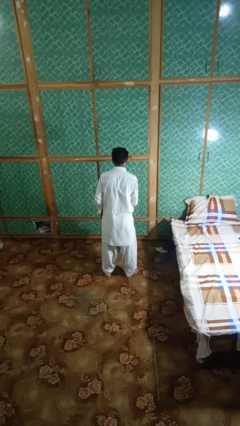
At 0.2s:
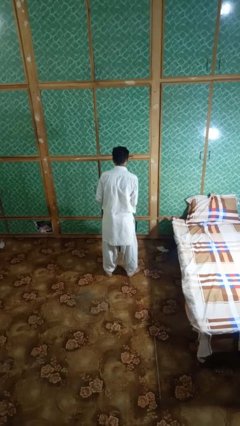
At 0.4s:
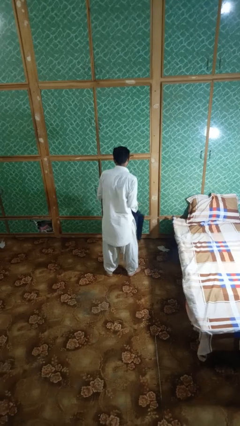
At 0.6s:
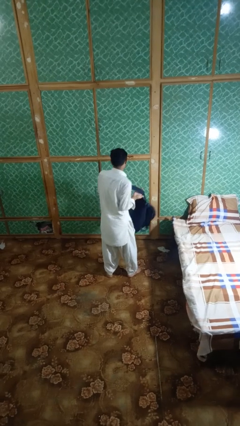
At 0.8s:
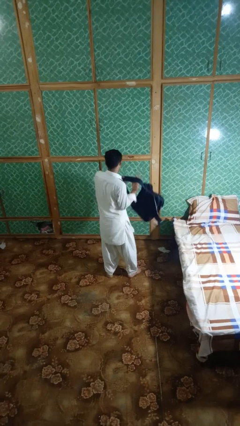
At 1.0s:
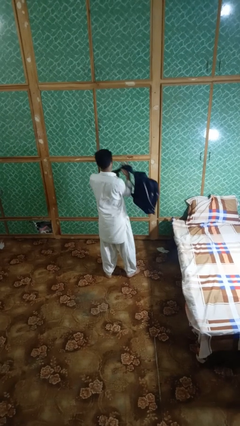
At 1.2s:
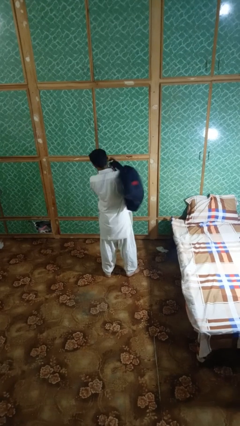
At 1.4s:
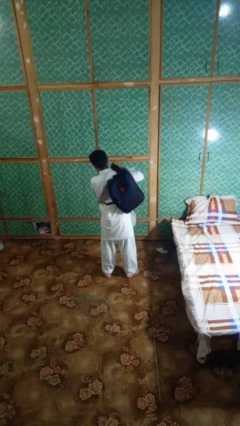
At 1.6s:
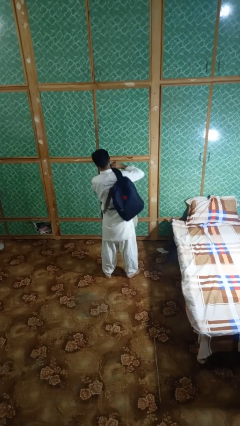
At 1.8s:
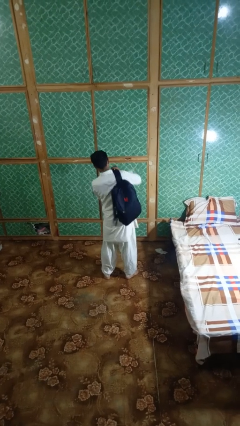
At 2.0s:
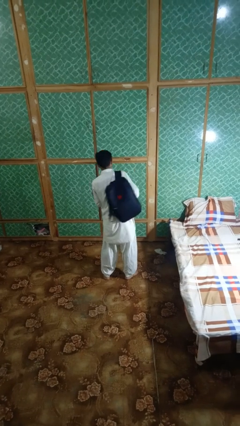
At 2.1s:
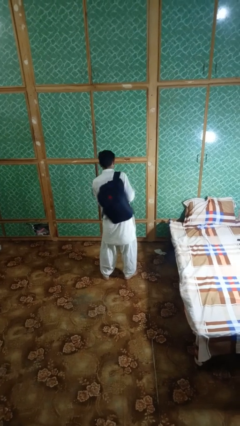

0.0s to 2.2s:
person puts on backpack

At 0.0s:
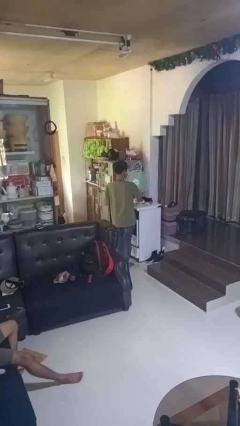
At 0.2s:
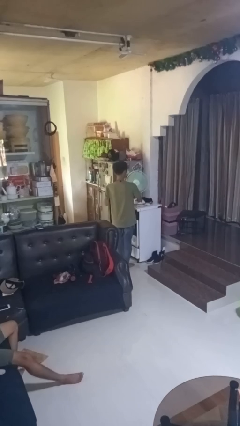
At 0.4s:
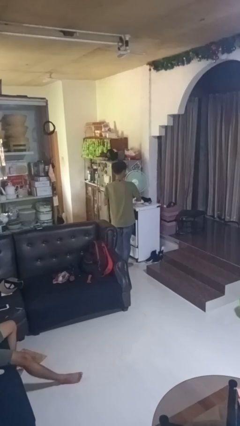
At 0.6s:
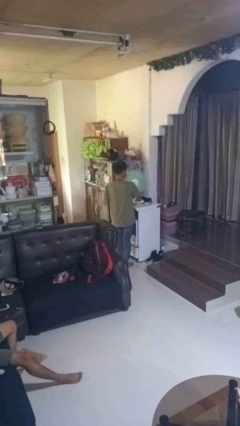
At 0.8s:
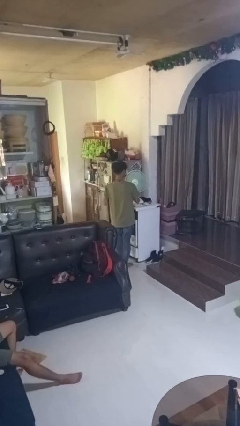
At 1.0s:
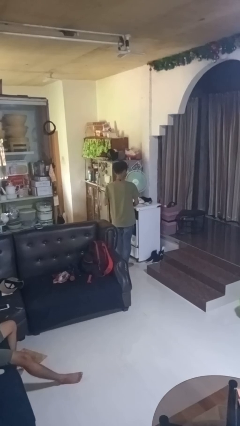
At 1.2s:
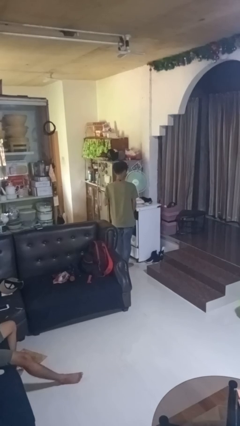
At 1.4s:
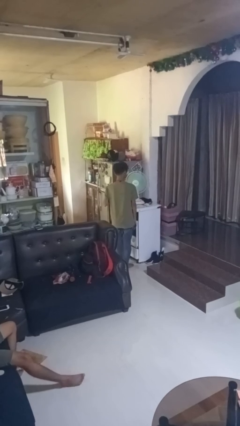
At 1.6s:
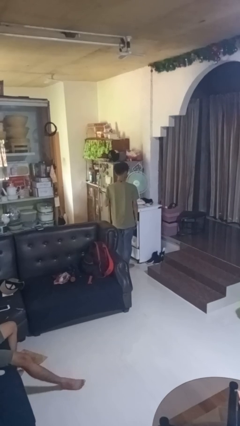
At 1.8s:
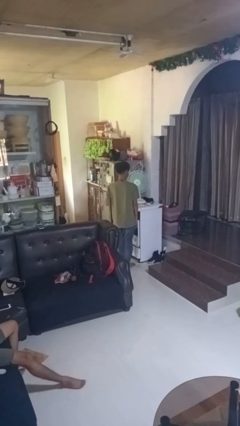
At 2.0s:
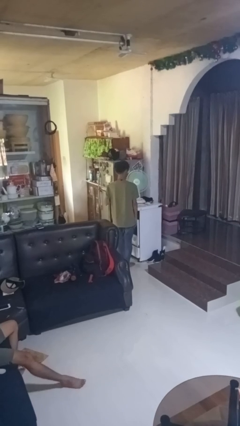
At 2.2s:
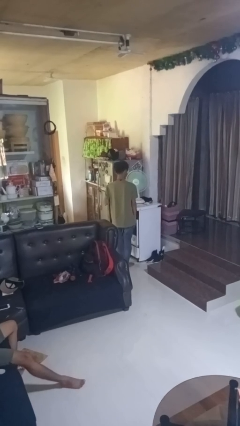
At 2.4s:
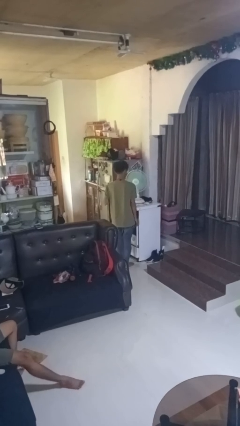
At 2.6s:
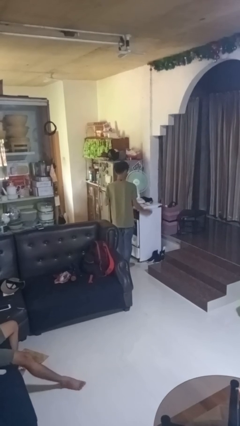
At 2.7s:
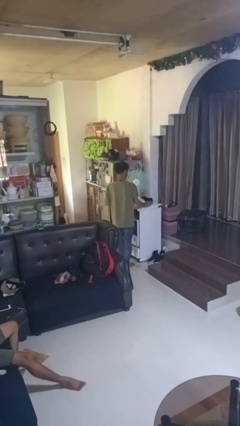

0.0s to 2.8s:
person turns on fan

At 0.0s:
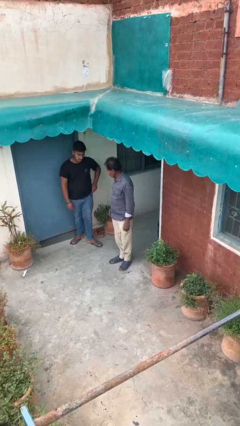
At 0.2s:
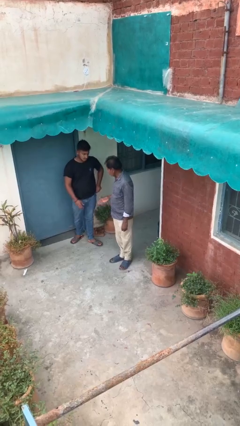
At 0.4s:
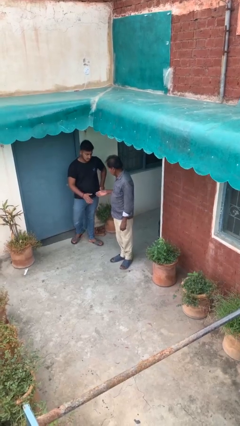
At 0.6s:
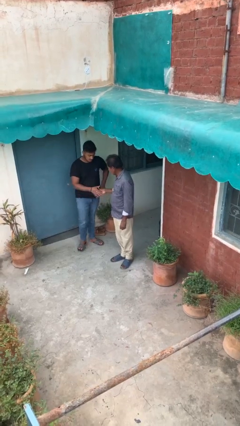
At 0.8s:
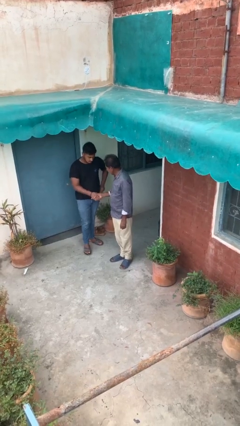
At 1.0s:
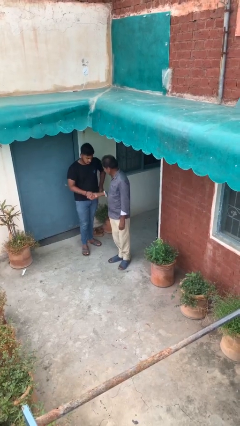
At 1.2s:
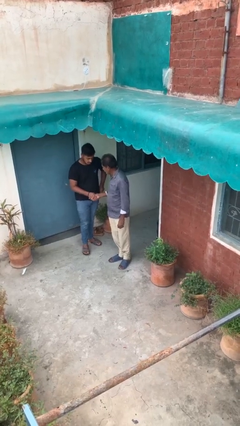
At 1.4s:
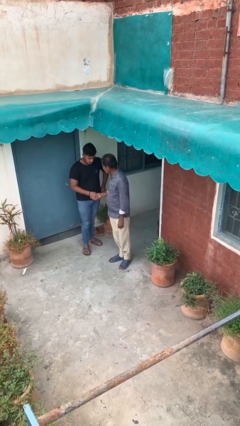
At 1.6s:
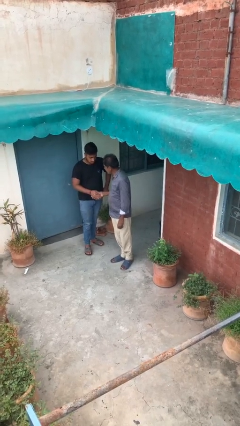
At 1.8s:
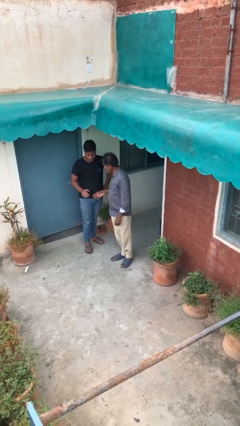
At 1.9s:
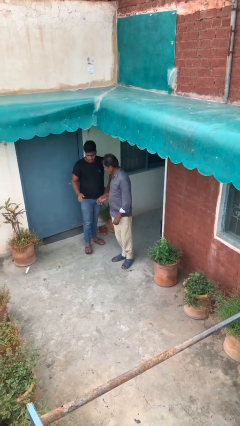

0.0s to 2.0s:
person shakes hand

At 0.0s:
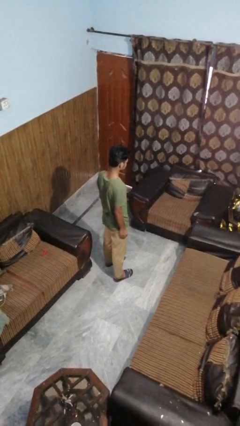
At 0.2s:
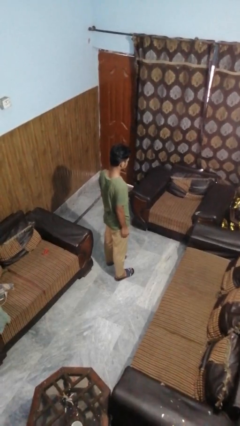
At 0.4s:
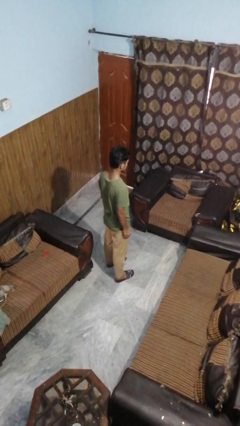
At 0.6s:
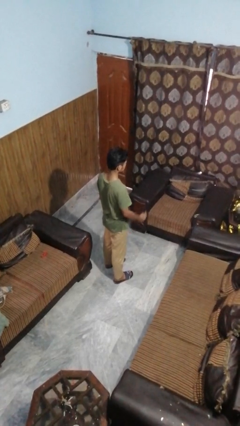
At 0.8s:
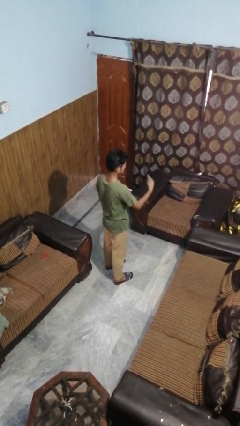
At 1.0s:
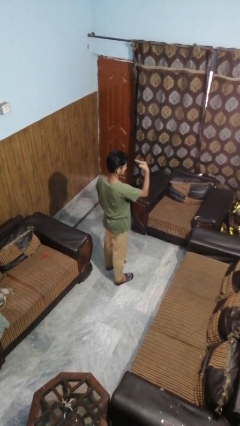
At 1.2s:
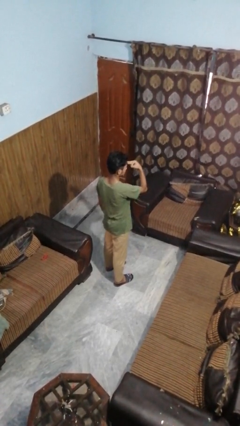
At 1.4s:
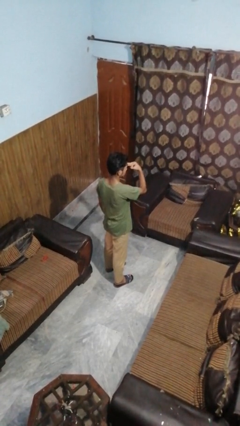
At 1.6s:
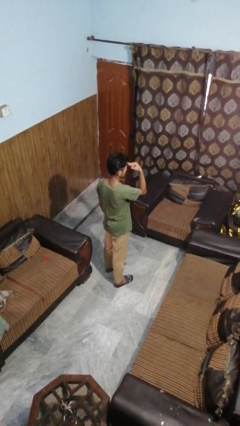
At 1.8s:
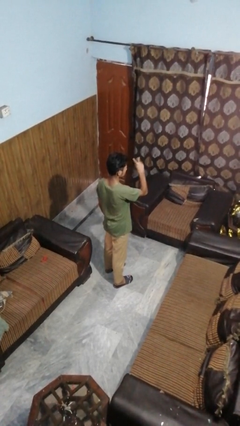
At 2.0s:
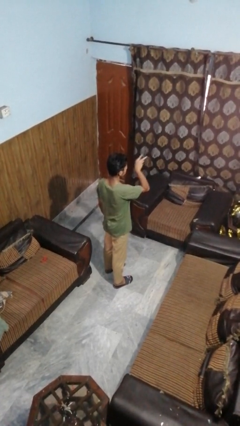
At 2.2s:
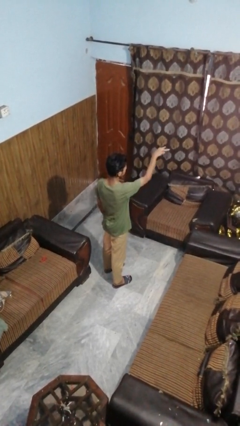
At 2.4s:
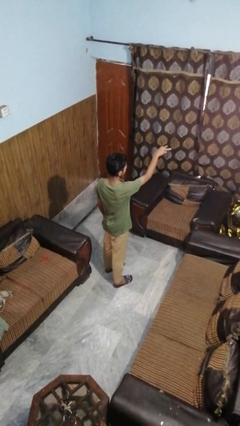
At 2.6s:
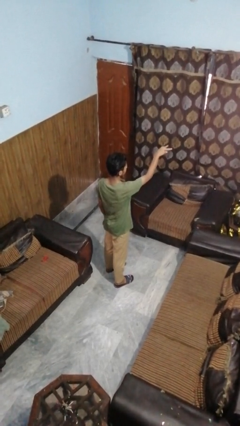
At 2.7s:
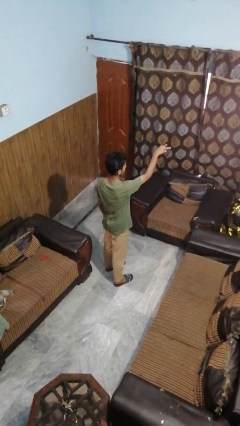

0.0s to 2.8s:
person gestures watch closely

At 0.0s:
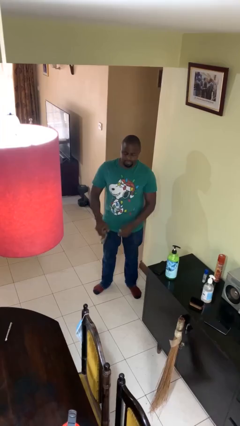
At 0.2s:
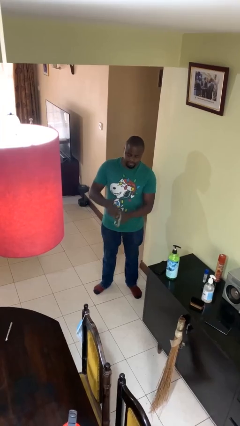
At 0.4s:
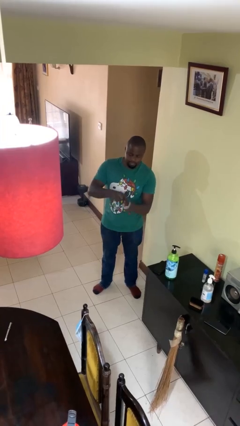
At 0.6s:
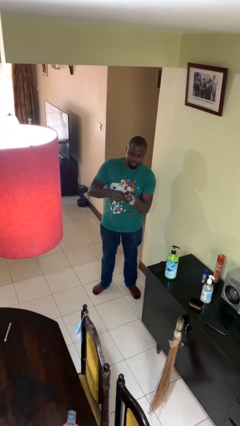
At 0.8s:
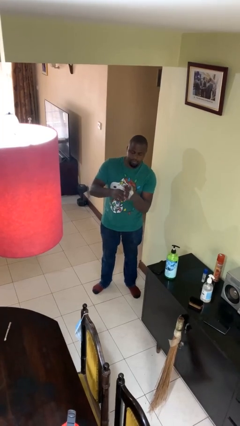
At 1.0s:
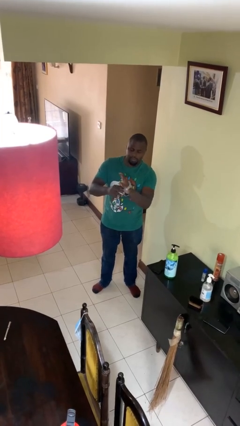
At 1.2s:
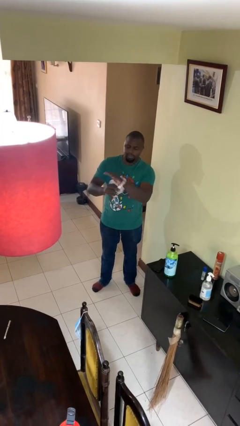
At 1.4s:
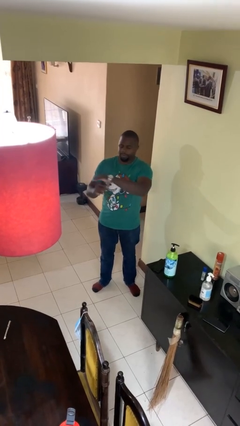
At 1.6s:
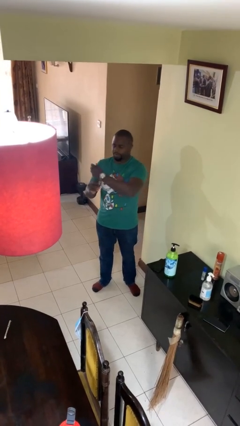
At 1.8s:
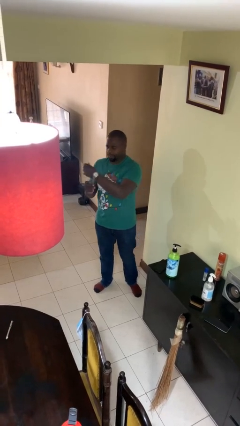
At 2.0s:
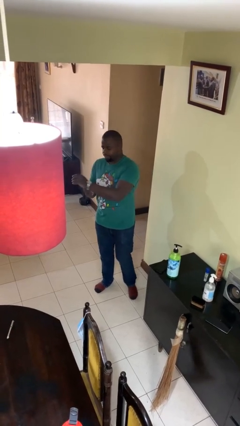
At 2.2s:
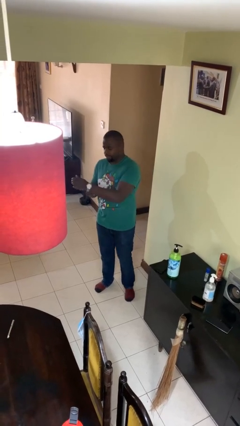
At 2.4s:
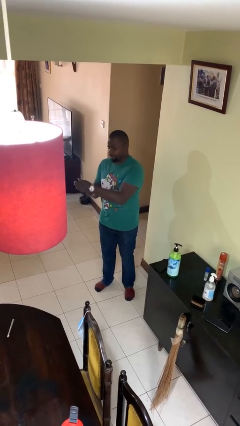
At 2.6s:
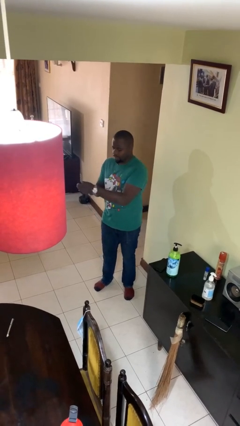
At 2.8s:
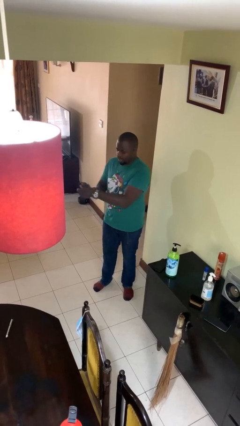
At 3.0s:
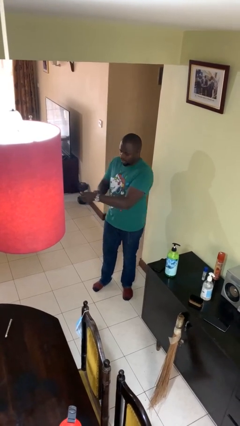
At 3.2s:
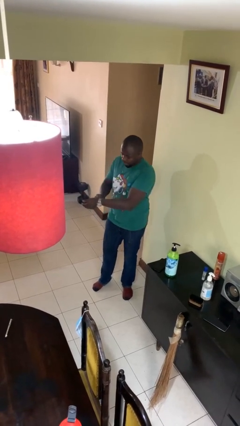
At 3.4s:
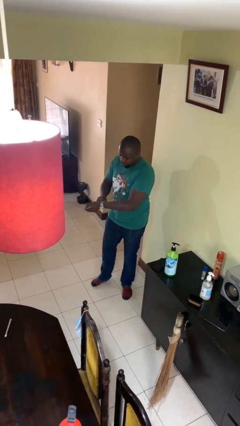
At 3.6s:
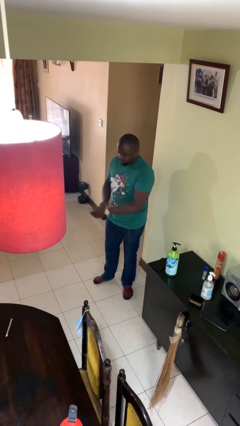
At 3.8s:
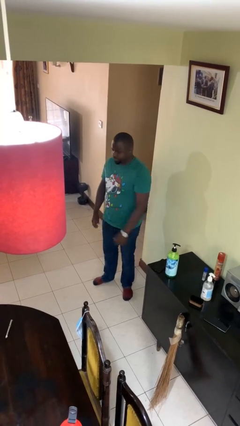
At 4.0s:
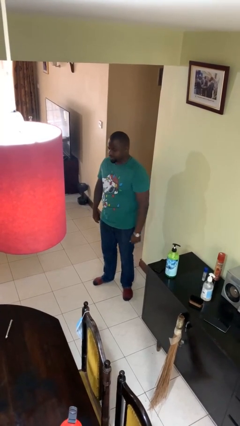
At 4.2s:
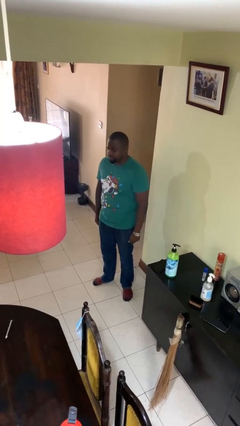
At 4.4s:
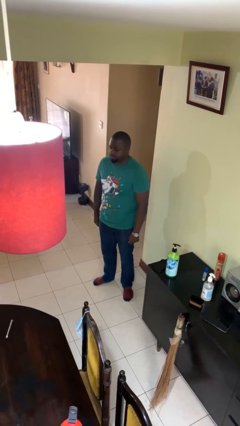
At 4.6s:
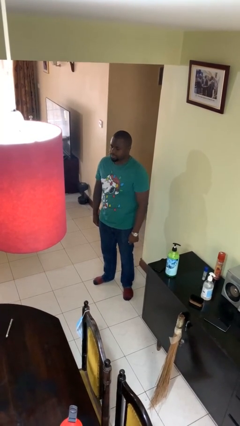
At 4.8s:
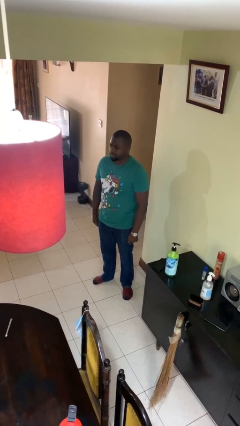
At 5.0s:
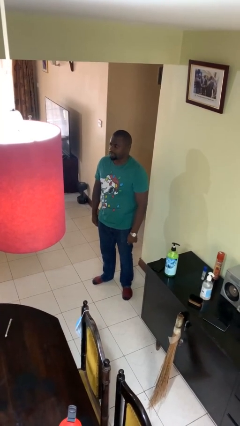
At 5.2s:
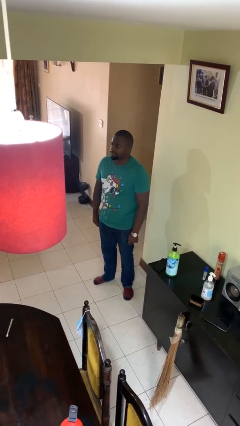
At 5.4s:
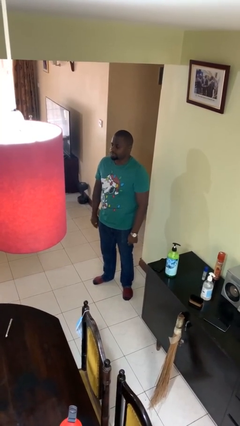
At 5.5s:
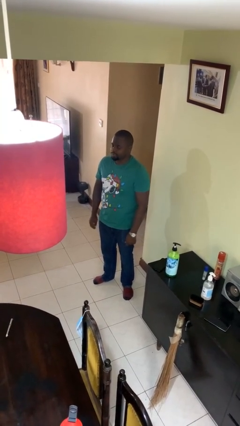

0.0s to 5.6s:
person puts on wristwatch

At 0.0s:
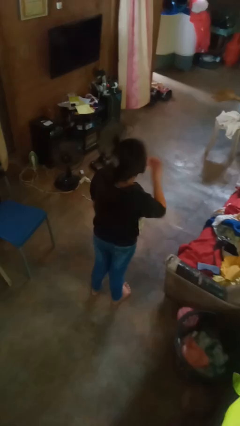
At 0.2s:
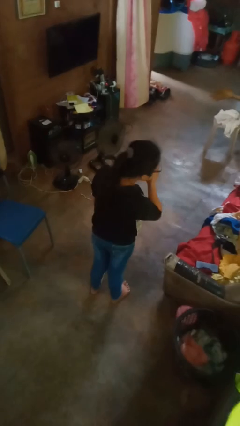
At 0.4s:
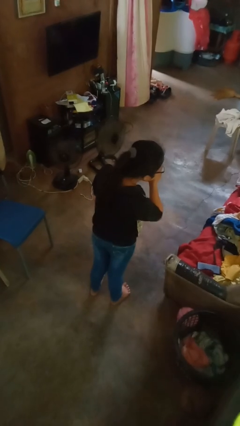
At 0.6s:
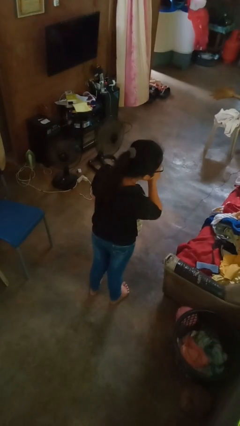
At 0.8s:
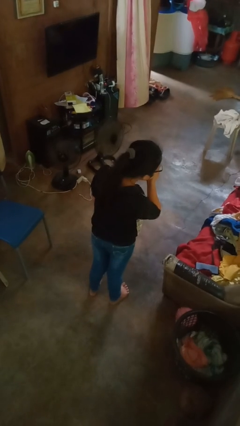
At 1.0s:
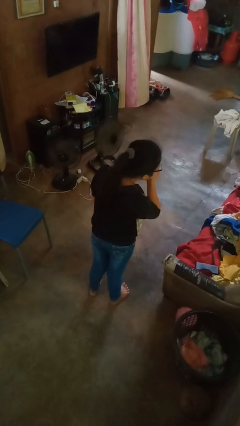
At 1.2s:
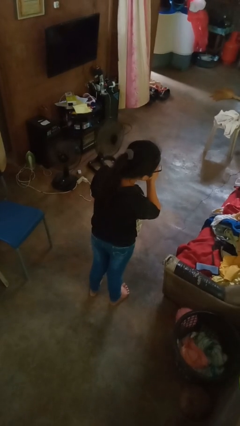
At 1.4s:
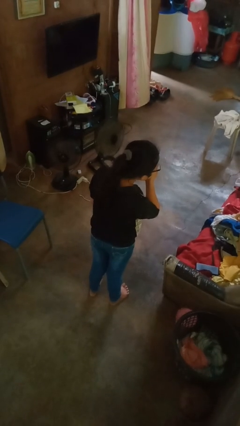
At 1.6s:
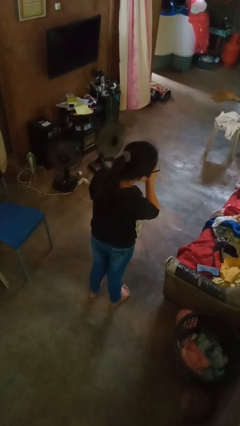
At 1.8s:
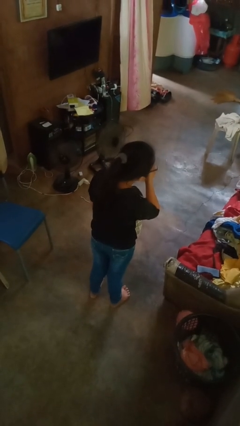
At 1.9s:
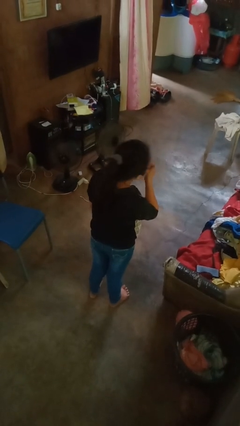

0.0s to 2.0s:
person sneezes into hand

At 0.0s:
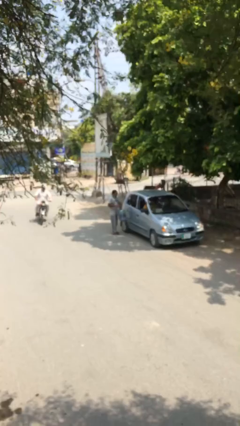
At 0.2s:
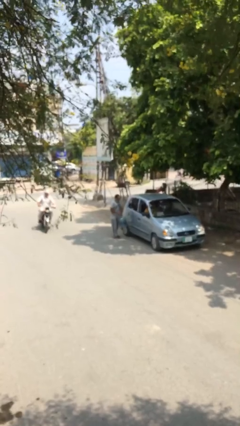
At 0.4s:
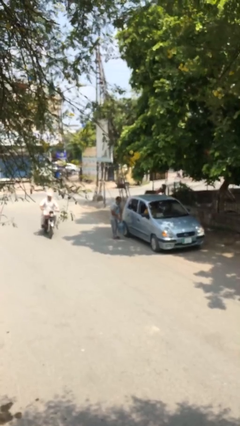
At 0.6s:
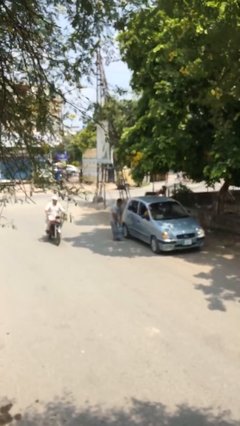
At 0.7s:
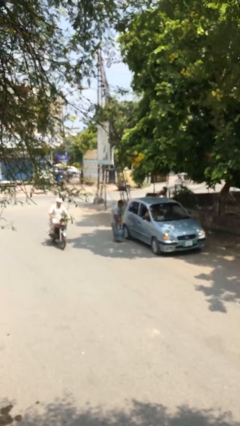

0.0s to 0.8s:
person closes car door
